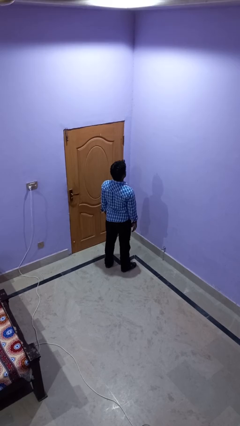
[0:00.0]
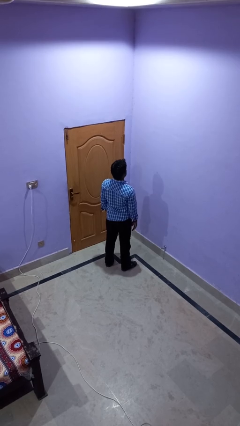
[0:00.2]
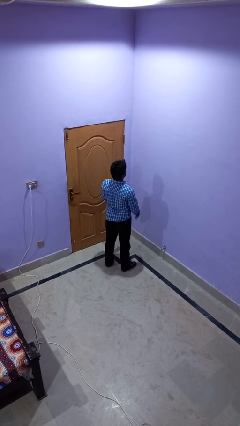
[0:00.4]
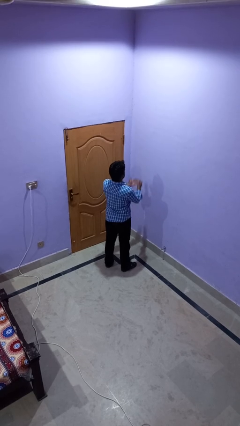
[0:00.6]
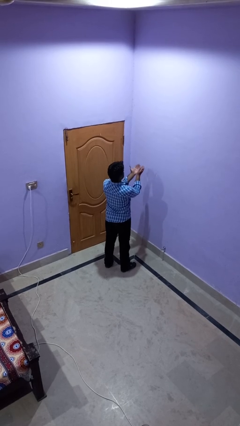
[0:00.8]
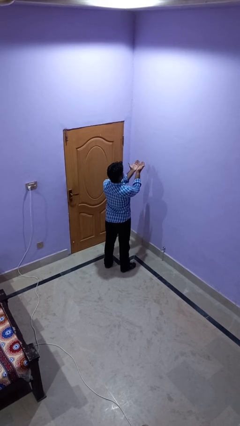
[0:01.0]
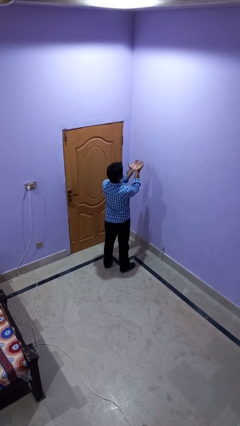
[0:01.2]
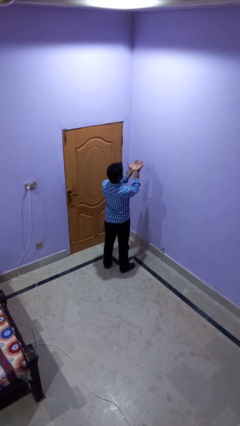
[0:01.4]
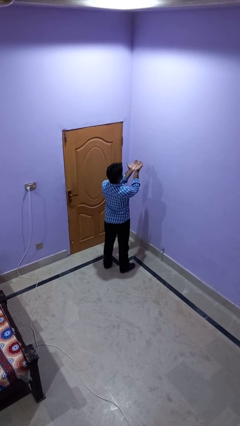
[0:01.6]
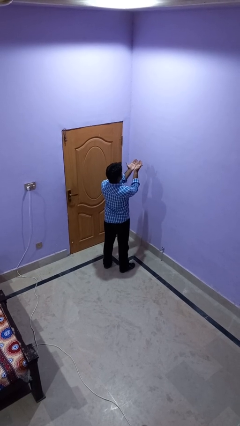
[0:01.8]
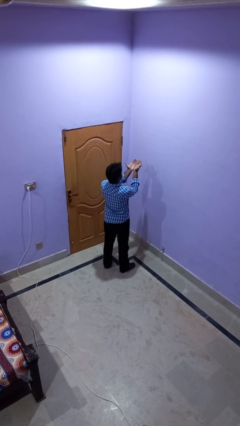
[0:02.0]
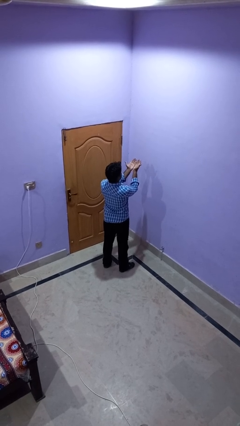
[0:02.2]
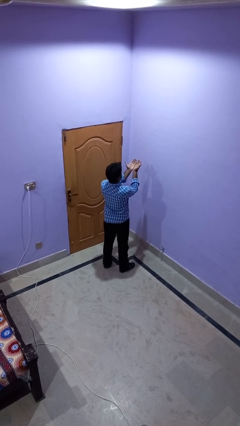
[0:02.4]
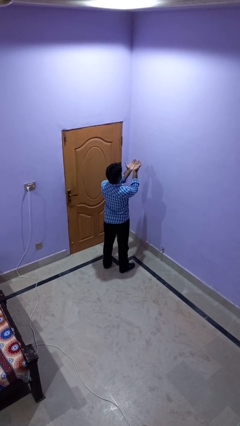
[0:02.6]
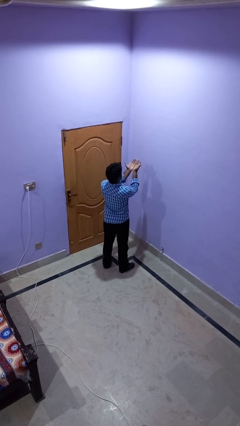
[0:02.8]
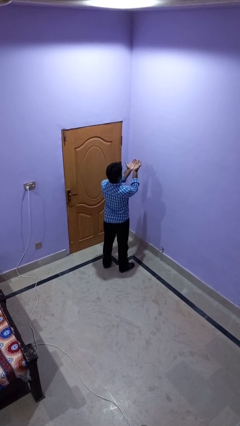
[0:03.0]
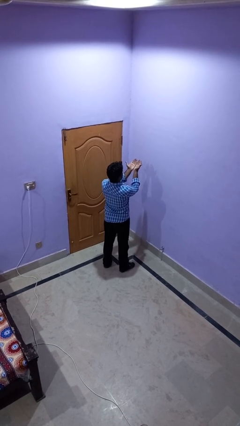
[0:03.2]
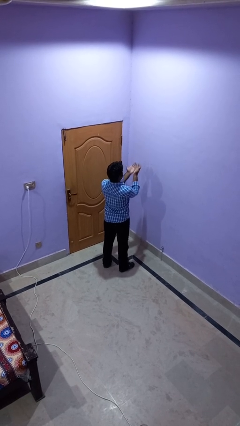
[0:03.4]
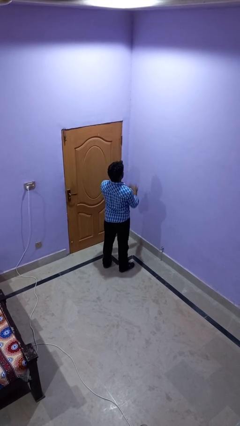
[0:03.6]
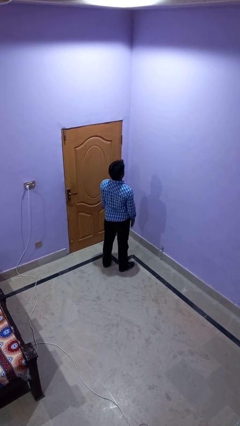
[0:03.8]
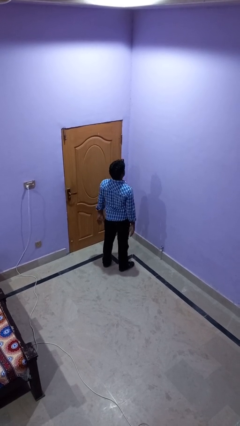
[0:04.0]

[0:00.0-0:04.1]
person prays

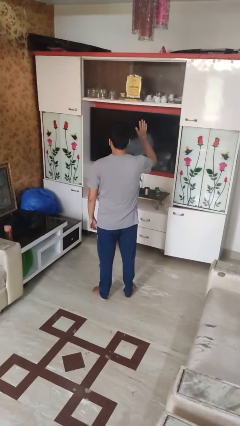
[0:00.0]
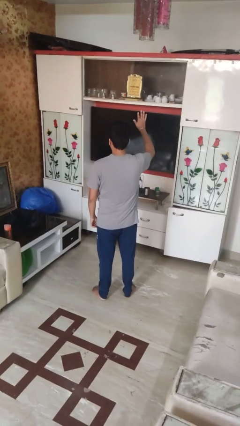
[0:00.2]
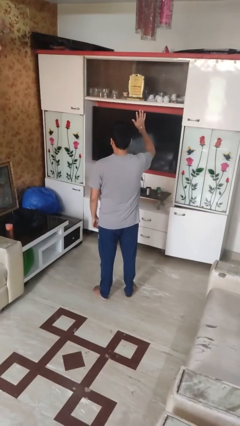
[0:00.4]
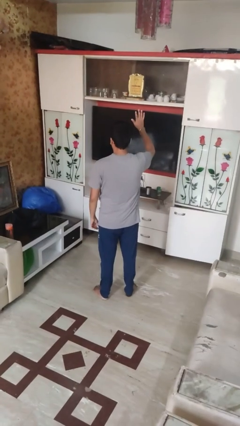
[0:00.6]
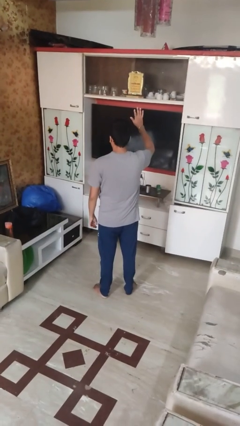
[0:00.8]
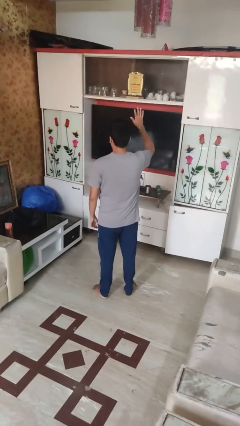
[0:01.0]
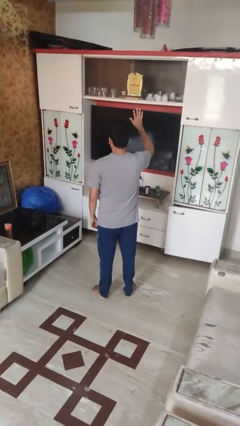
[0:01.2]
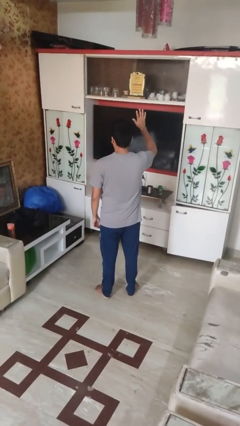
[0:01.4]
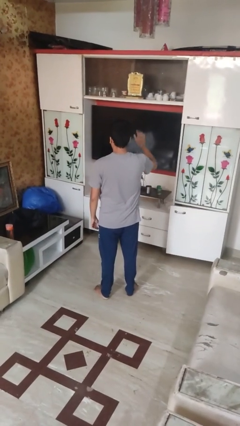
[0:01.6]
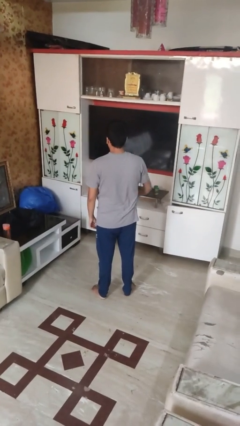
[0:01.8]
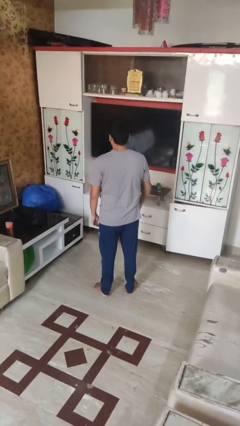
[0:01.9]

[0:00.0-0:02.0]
person gestures number five

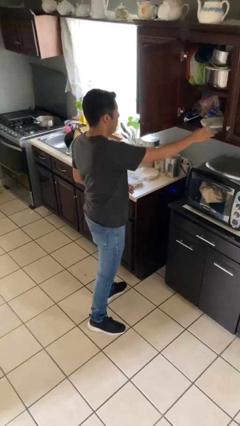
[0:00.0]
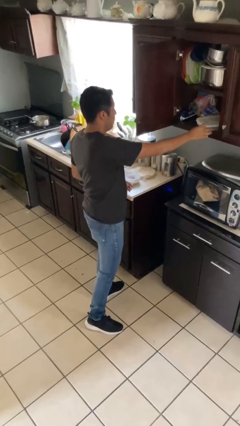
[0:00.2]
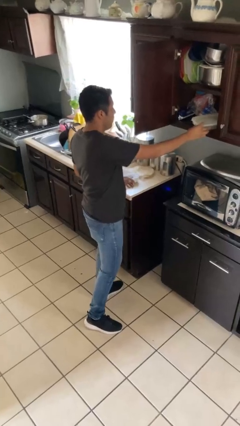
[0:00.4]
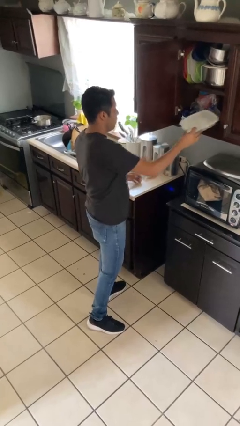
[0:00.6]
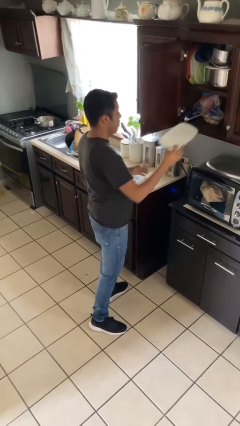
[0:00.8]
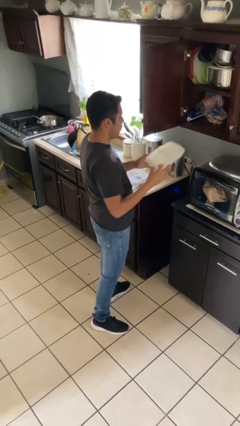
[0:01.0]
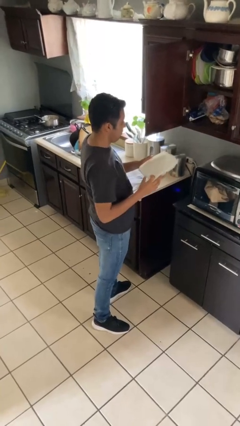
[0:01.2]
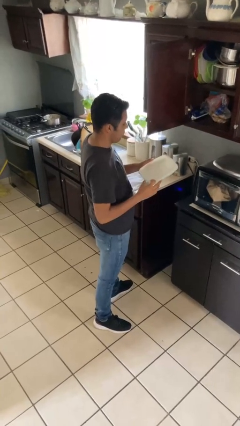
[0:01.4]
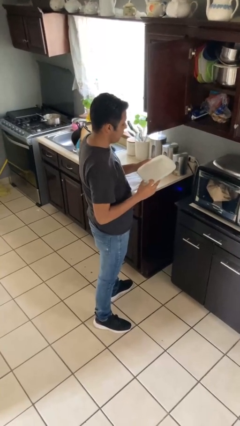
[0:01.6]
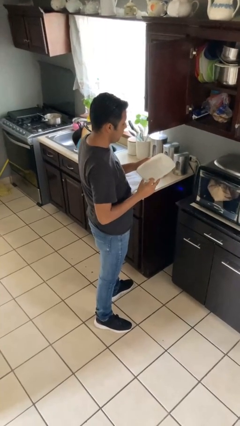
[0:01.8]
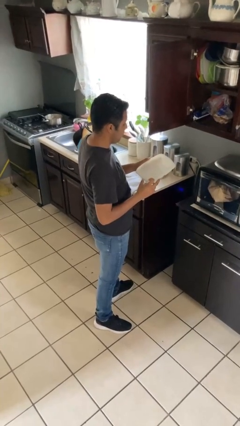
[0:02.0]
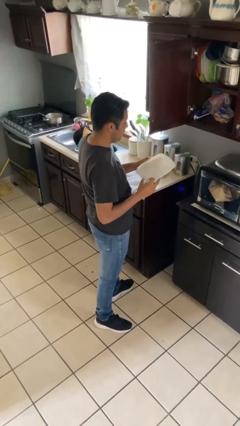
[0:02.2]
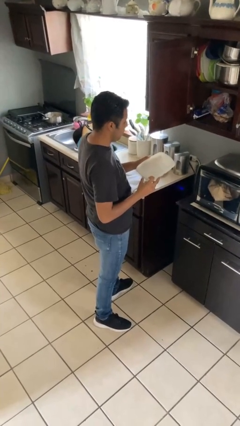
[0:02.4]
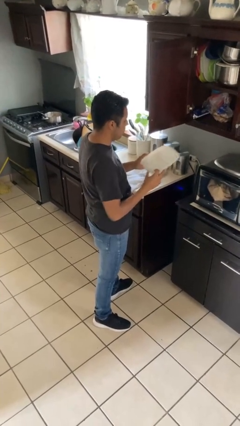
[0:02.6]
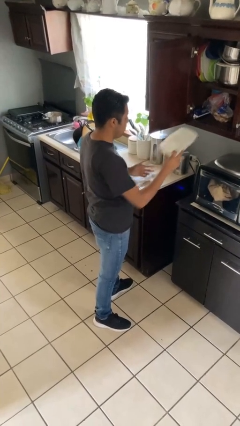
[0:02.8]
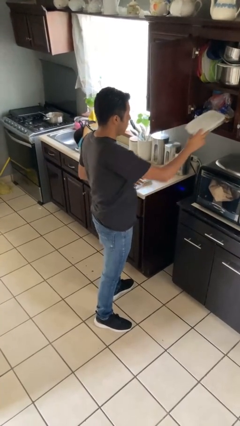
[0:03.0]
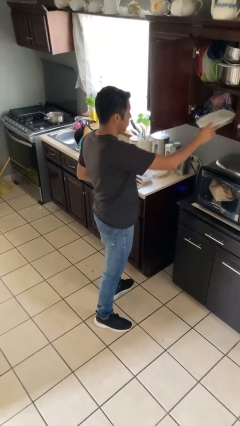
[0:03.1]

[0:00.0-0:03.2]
person picks up object from cabinet

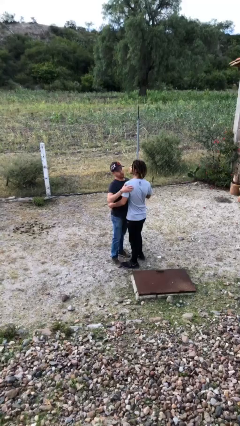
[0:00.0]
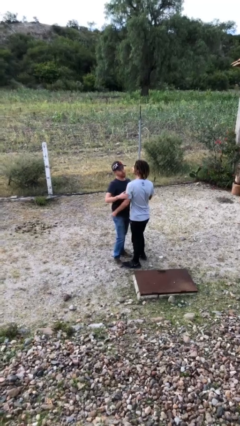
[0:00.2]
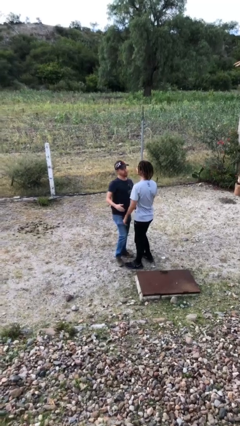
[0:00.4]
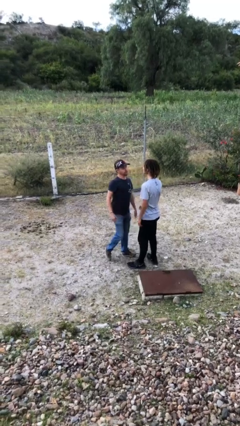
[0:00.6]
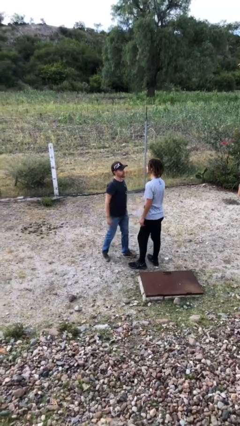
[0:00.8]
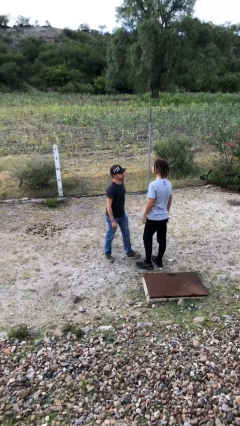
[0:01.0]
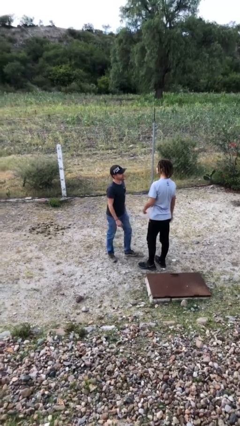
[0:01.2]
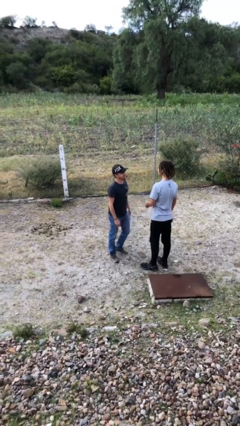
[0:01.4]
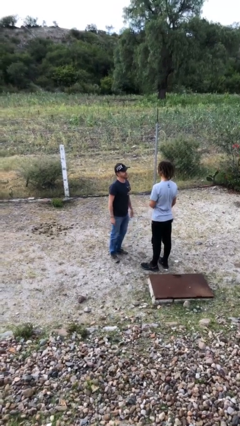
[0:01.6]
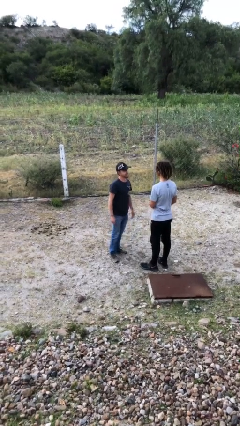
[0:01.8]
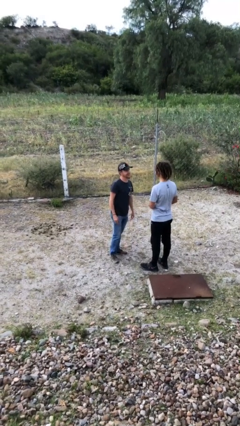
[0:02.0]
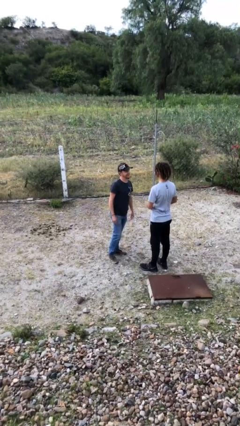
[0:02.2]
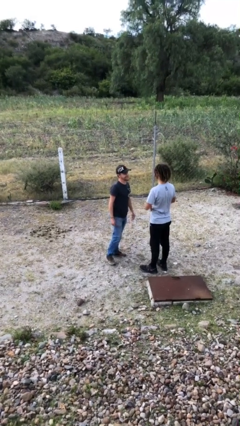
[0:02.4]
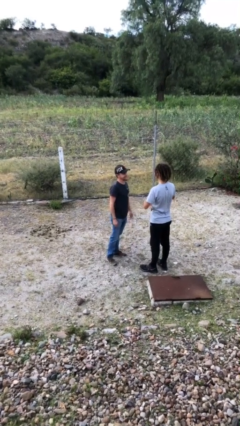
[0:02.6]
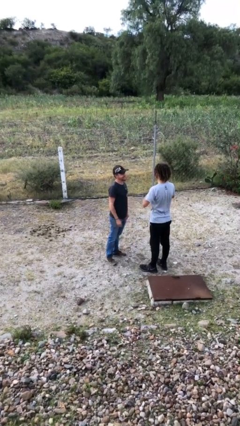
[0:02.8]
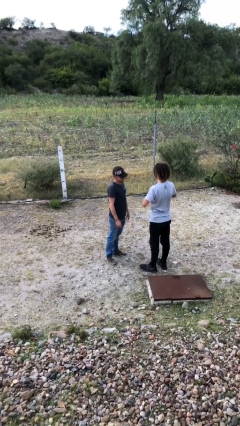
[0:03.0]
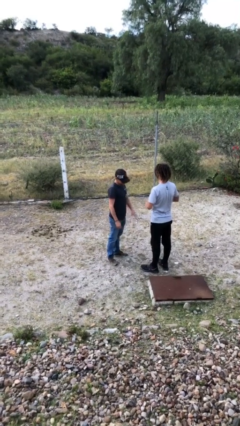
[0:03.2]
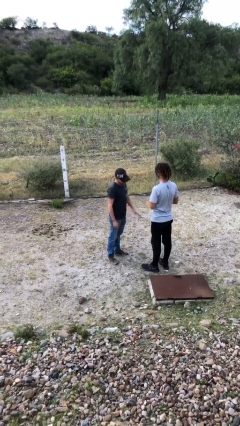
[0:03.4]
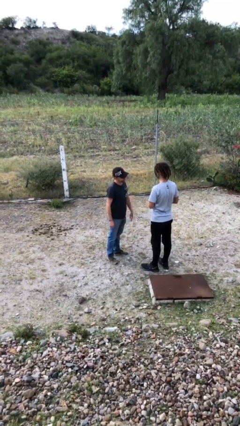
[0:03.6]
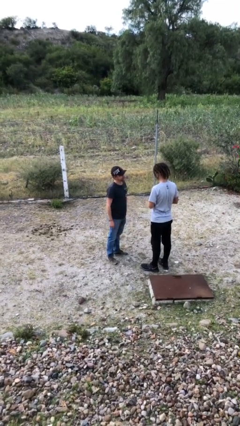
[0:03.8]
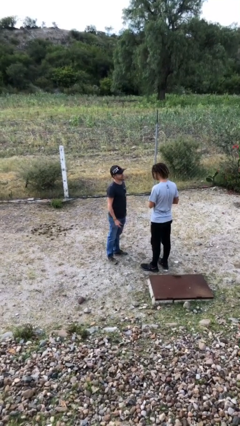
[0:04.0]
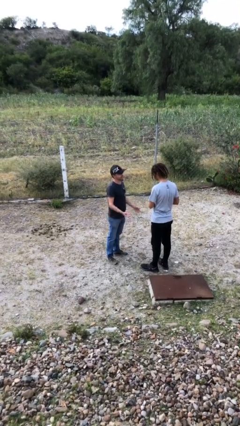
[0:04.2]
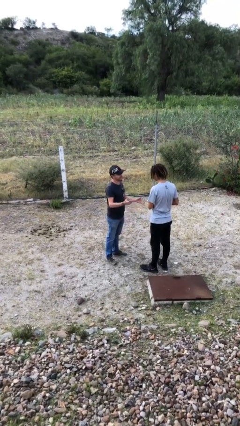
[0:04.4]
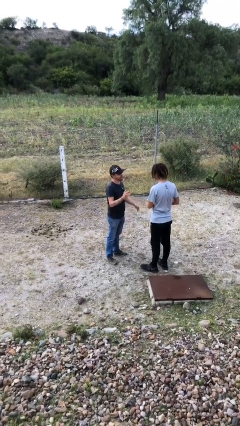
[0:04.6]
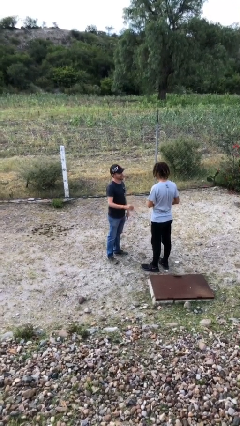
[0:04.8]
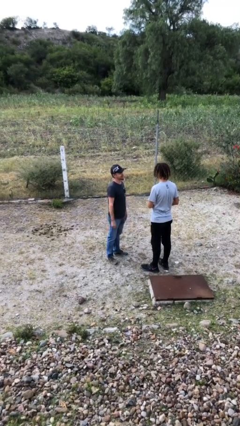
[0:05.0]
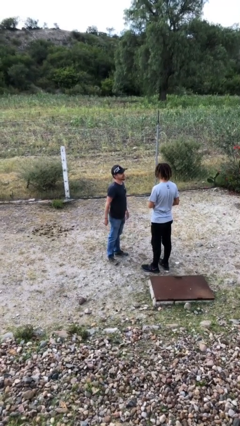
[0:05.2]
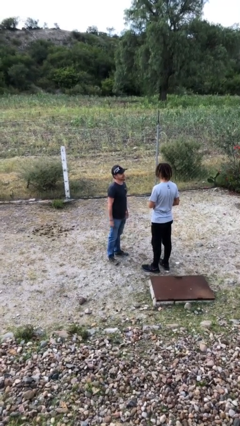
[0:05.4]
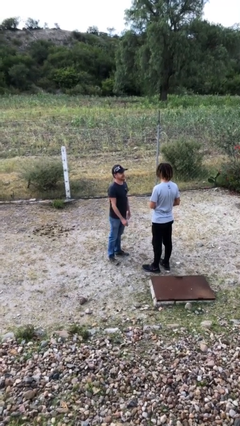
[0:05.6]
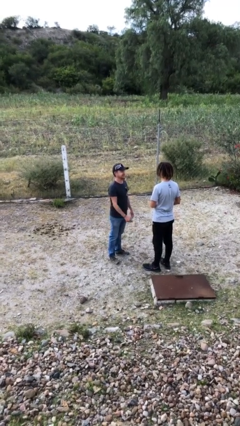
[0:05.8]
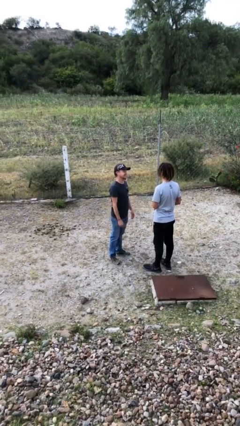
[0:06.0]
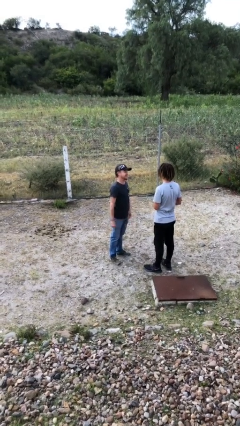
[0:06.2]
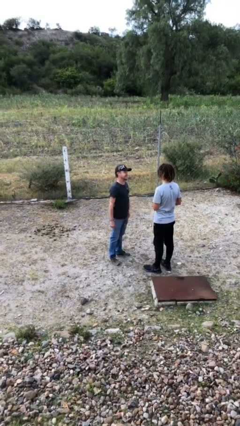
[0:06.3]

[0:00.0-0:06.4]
person talks to person

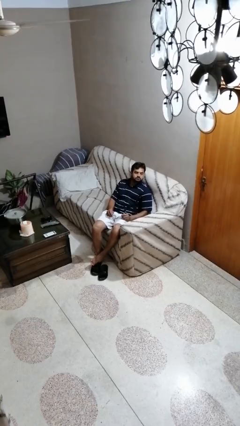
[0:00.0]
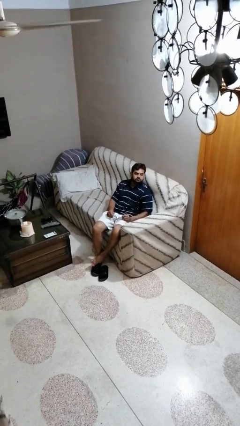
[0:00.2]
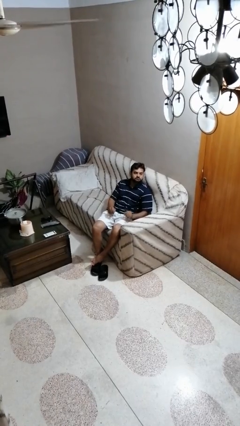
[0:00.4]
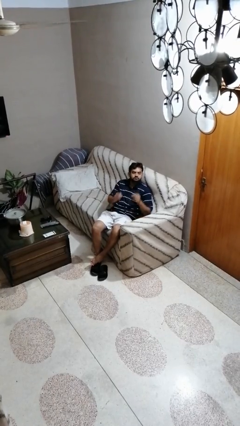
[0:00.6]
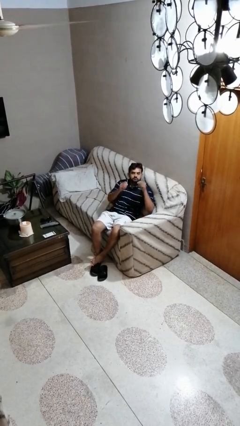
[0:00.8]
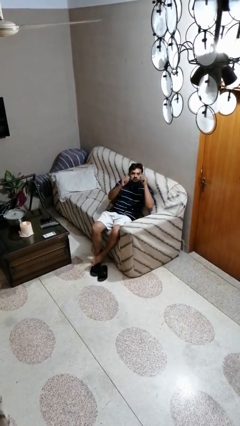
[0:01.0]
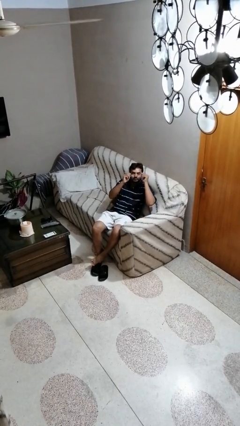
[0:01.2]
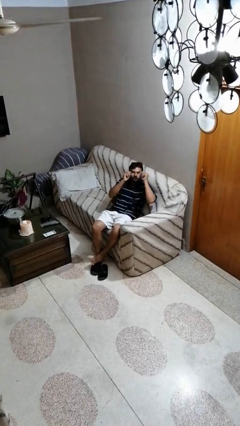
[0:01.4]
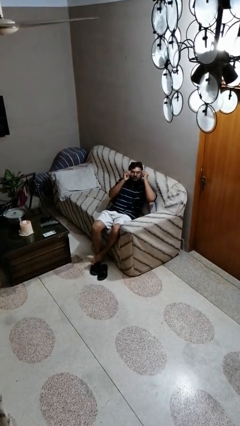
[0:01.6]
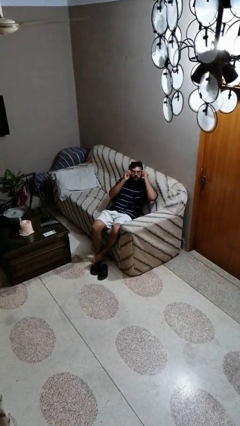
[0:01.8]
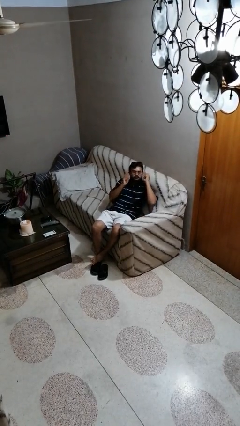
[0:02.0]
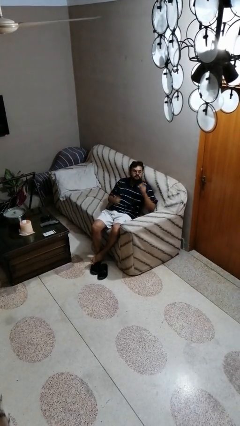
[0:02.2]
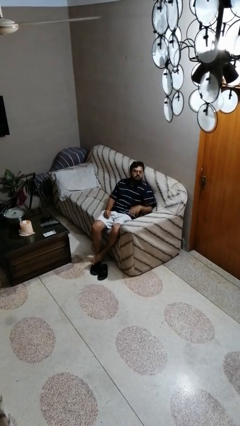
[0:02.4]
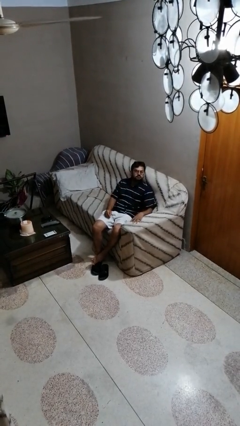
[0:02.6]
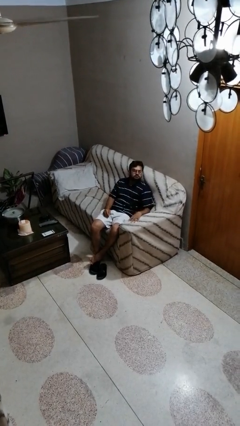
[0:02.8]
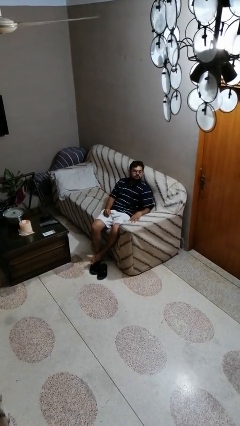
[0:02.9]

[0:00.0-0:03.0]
person puts on glasses
